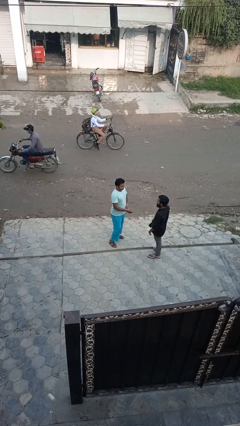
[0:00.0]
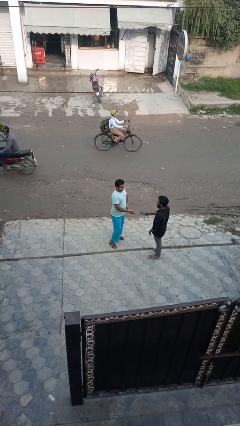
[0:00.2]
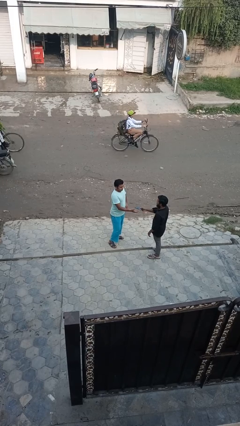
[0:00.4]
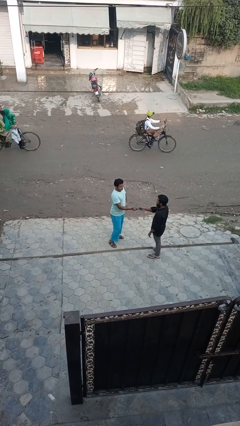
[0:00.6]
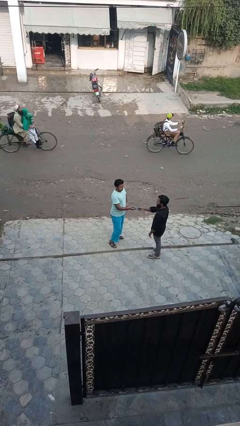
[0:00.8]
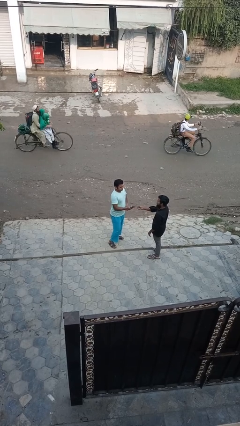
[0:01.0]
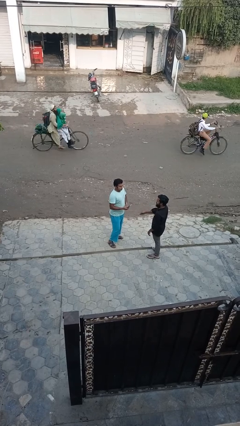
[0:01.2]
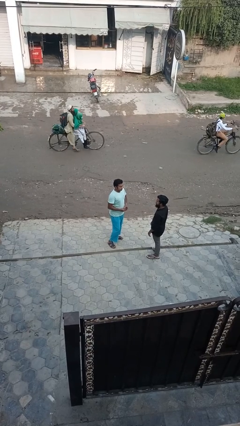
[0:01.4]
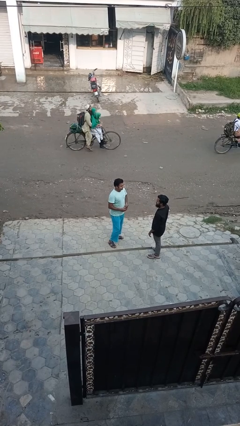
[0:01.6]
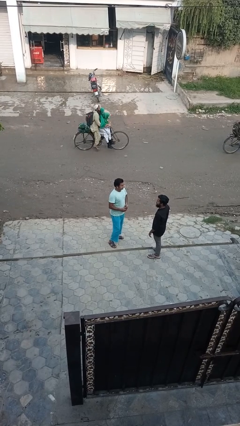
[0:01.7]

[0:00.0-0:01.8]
person transfers object to person

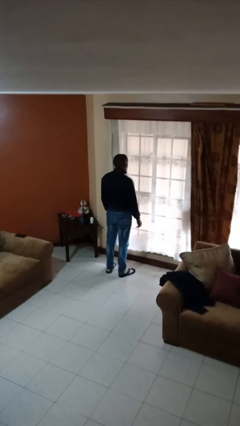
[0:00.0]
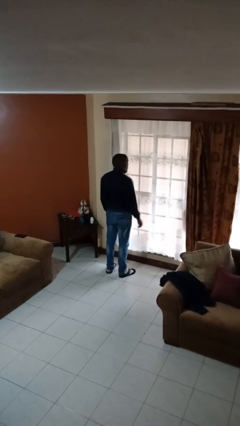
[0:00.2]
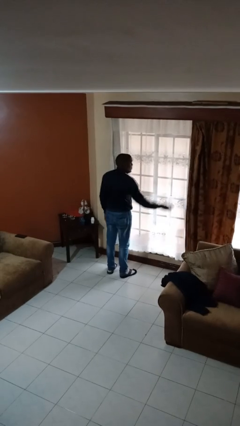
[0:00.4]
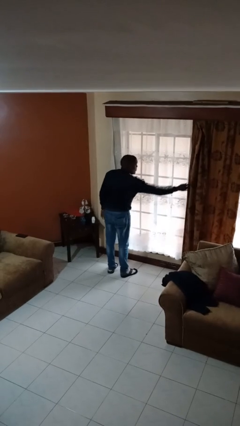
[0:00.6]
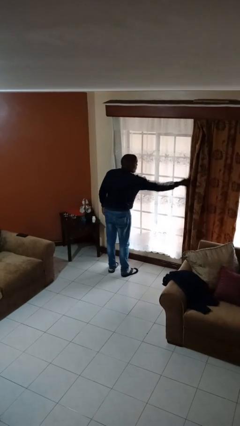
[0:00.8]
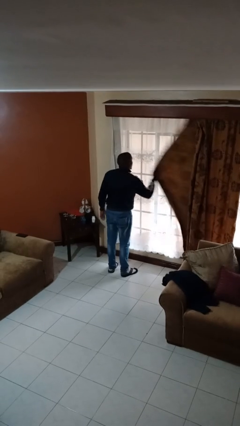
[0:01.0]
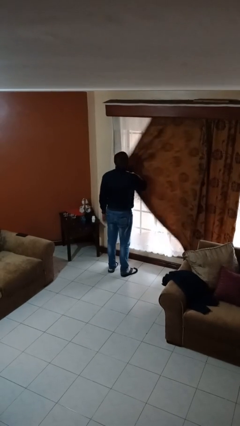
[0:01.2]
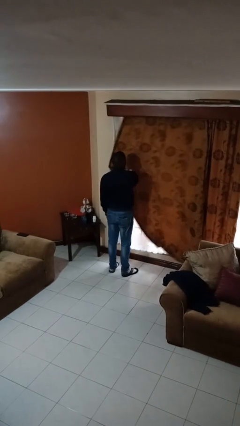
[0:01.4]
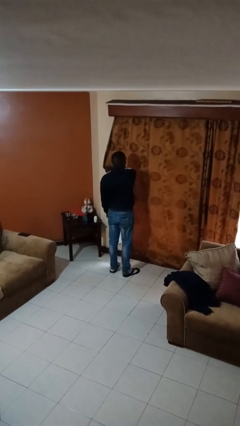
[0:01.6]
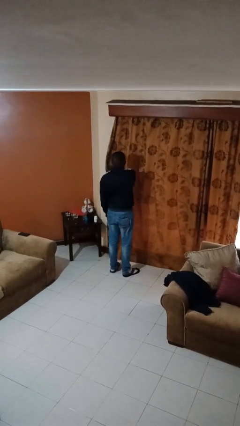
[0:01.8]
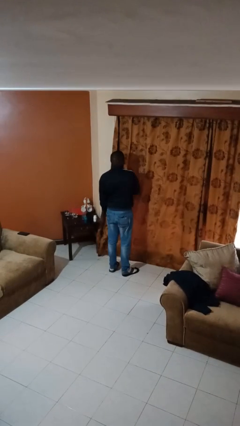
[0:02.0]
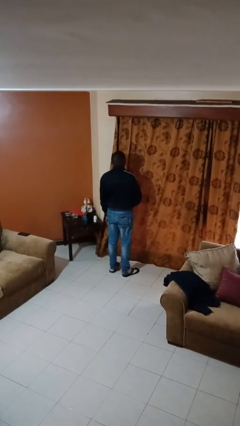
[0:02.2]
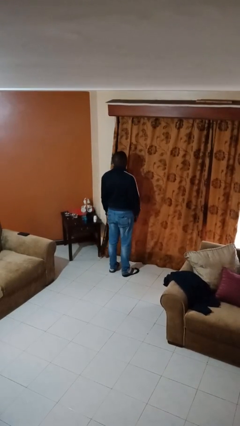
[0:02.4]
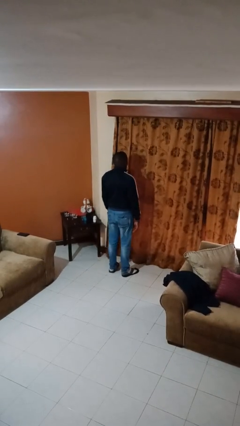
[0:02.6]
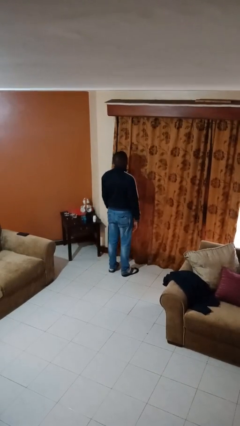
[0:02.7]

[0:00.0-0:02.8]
person closes curtains

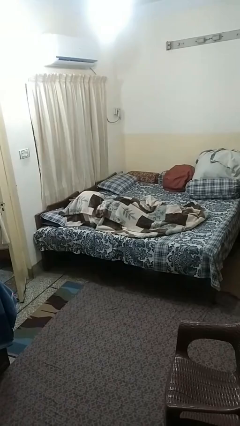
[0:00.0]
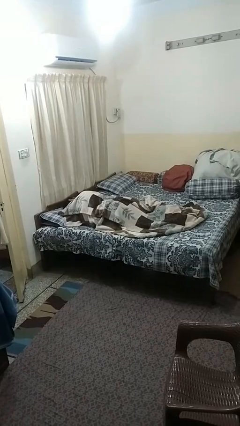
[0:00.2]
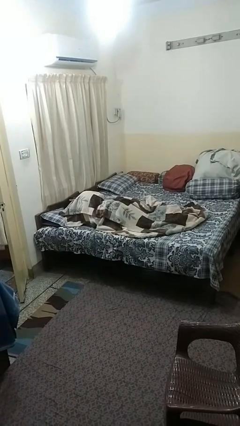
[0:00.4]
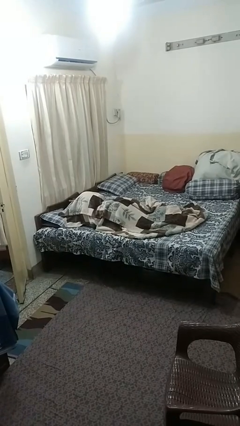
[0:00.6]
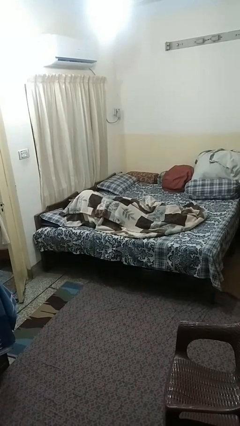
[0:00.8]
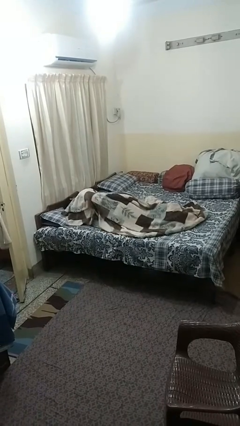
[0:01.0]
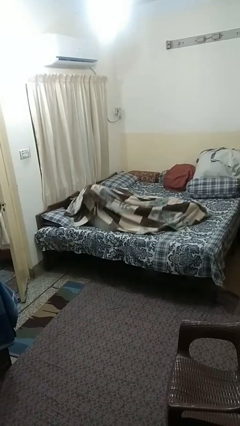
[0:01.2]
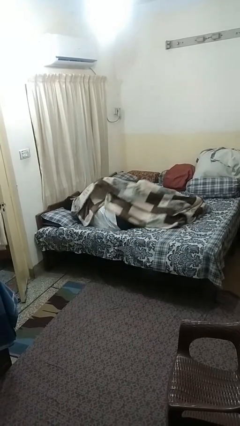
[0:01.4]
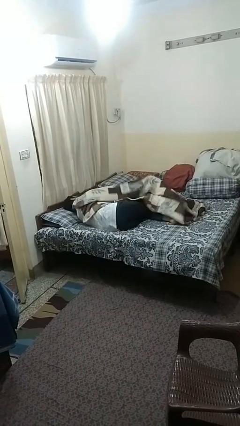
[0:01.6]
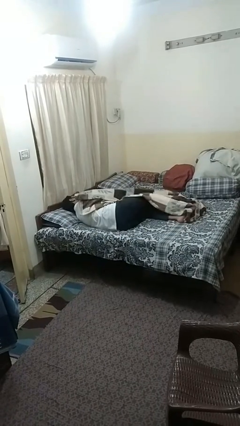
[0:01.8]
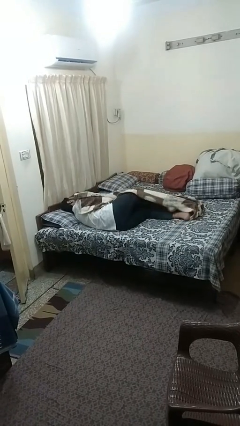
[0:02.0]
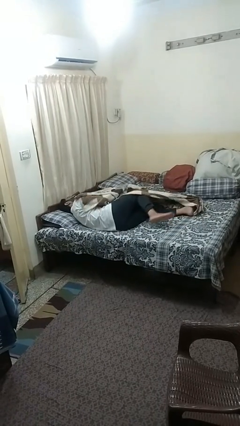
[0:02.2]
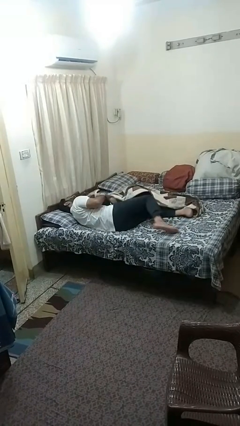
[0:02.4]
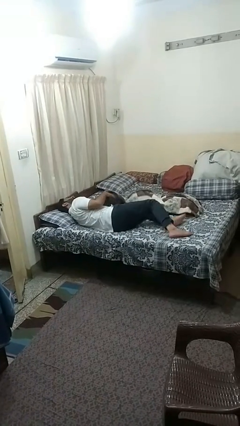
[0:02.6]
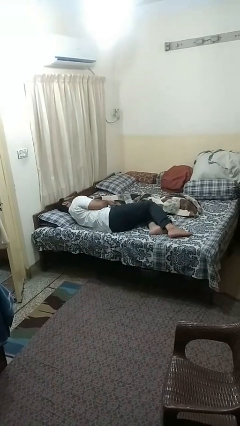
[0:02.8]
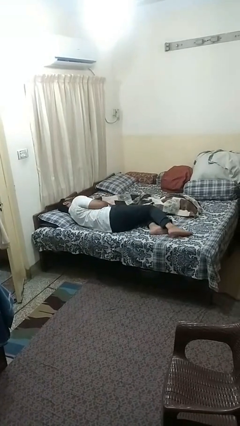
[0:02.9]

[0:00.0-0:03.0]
person uncovers with blanket

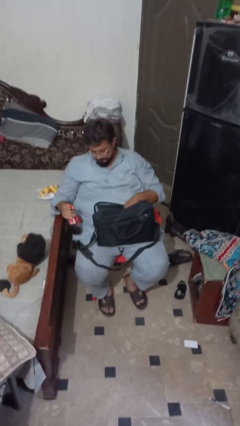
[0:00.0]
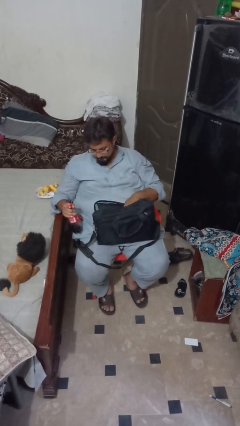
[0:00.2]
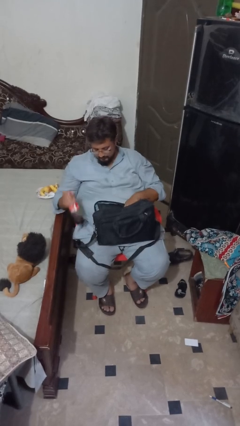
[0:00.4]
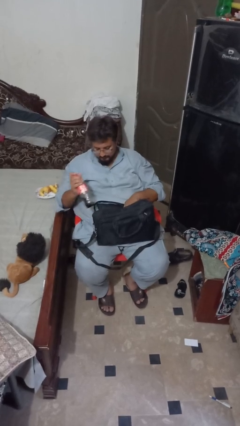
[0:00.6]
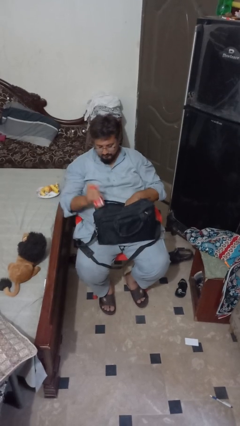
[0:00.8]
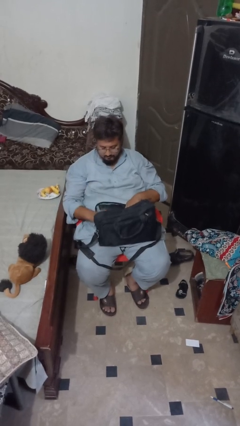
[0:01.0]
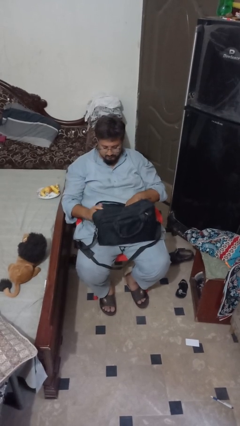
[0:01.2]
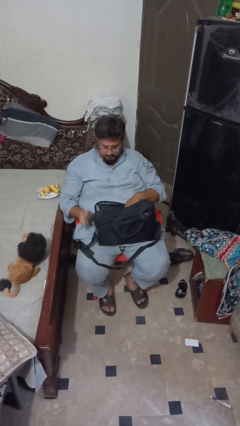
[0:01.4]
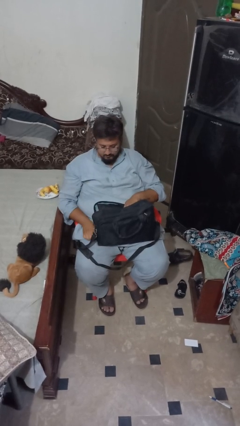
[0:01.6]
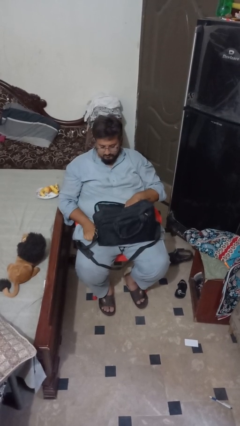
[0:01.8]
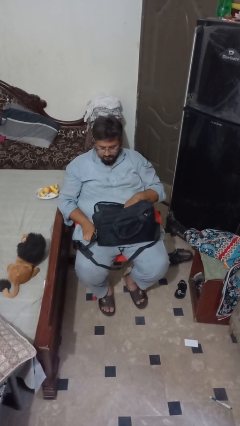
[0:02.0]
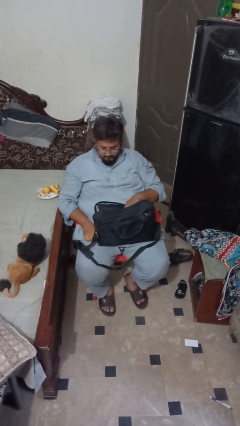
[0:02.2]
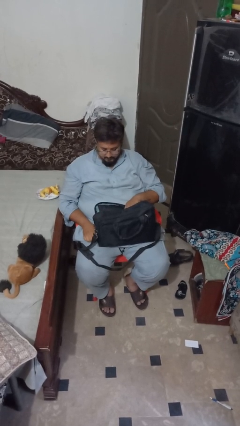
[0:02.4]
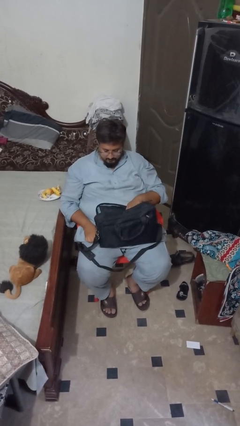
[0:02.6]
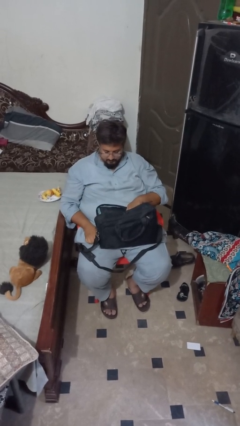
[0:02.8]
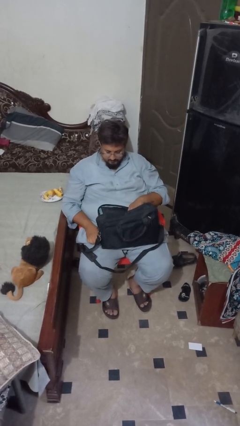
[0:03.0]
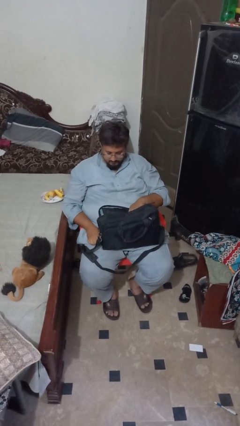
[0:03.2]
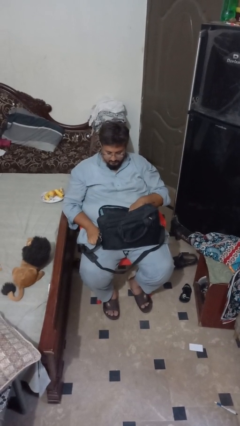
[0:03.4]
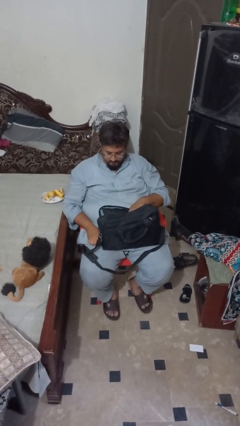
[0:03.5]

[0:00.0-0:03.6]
person puts object into bag

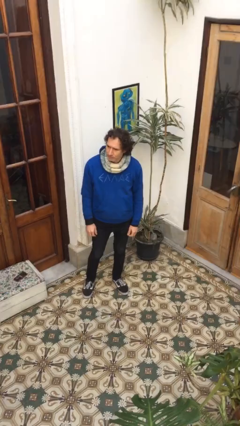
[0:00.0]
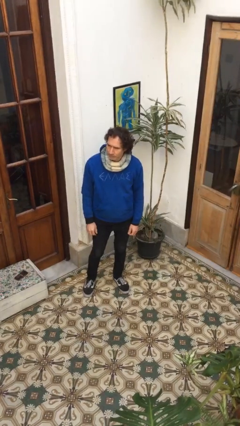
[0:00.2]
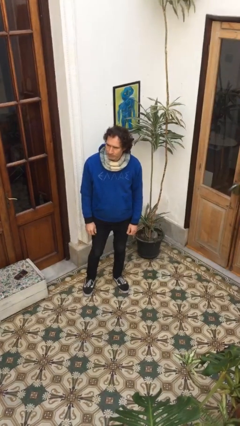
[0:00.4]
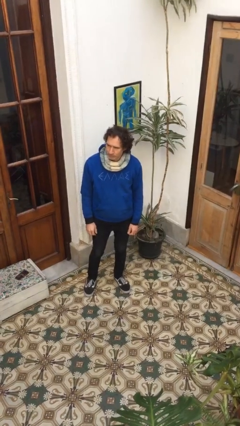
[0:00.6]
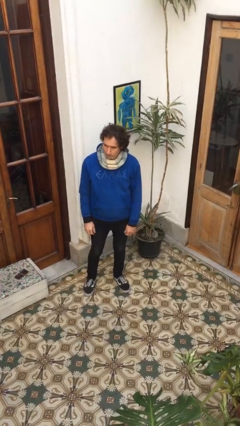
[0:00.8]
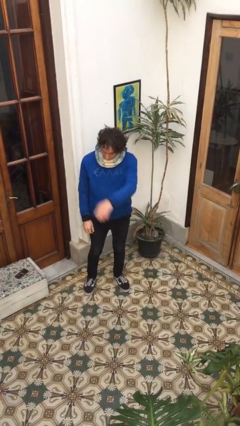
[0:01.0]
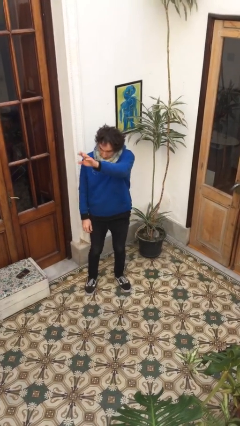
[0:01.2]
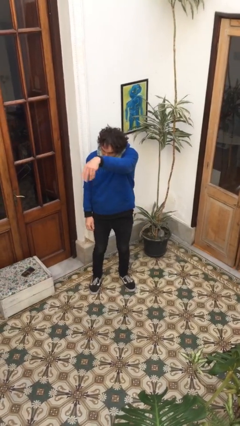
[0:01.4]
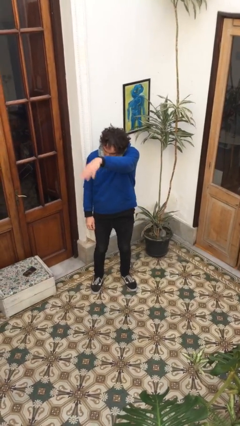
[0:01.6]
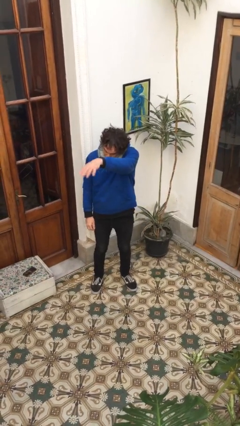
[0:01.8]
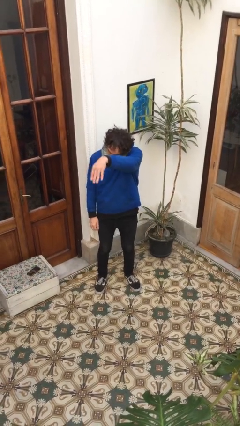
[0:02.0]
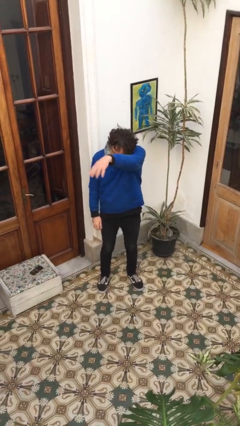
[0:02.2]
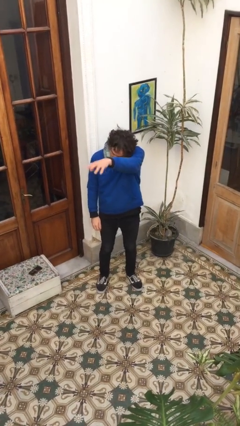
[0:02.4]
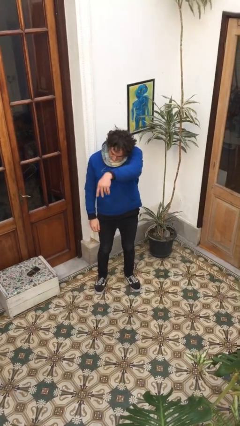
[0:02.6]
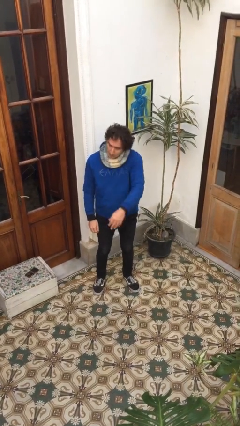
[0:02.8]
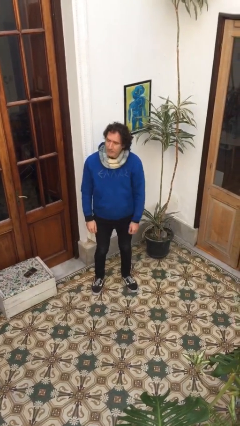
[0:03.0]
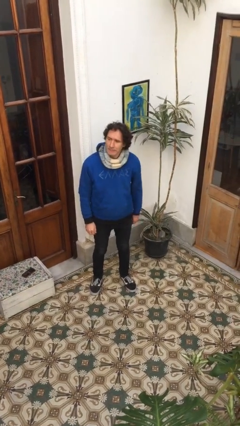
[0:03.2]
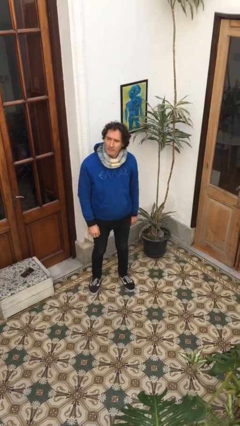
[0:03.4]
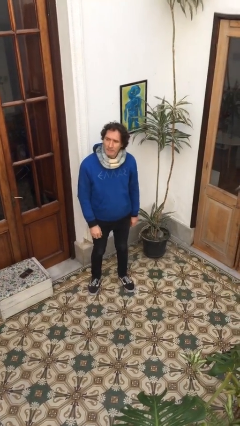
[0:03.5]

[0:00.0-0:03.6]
person gestures come here

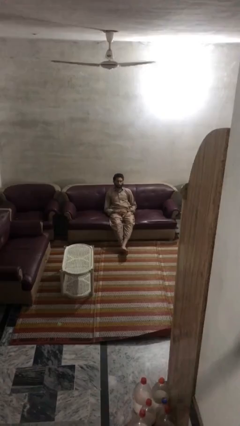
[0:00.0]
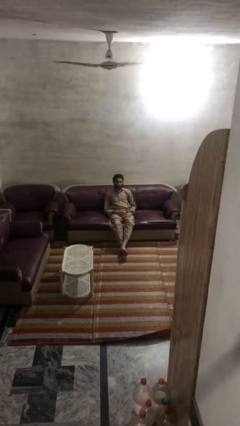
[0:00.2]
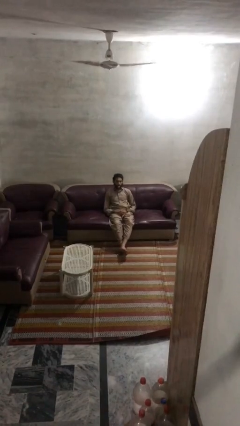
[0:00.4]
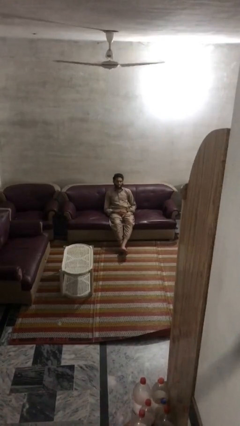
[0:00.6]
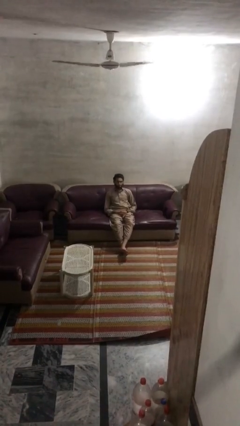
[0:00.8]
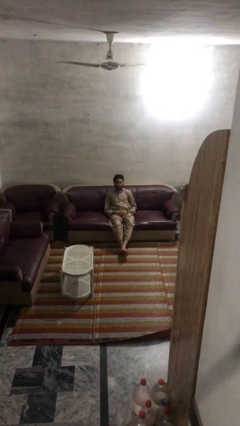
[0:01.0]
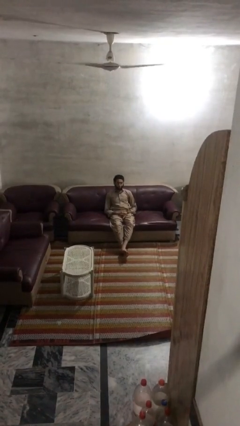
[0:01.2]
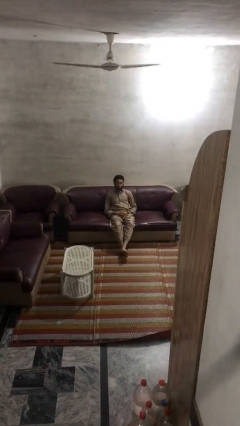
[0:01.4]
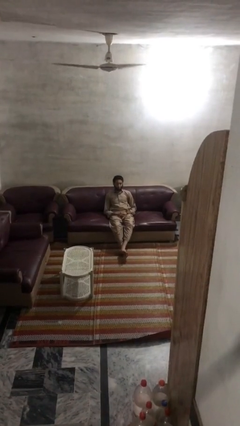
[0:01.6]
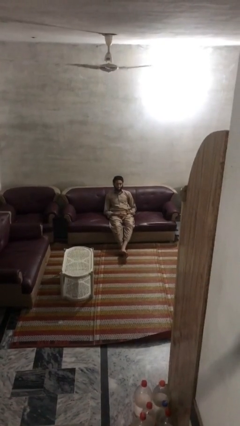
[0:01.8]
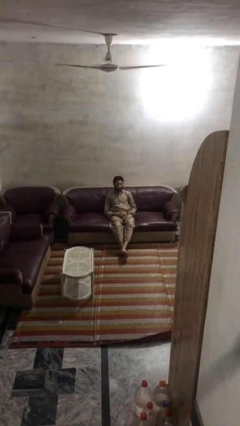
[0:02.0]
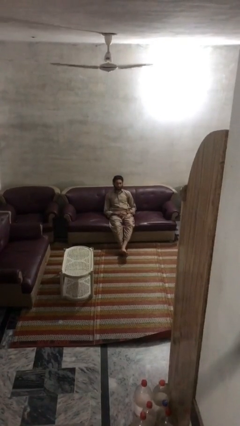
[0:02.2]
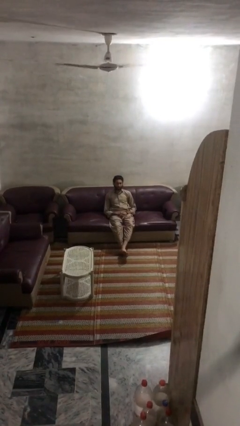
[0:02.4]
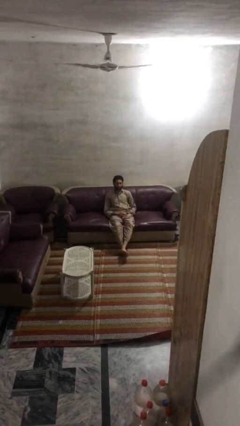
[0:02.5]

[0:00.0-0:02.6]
person sticks out tongue
